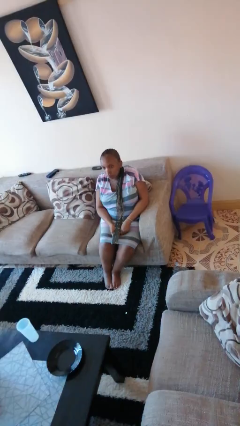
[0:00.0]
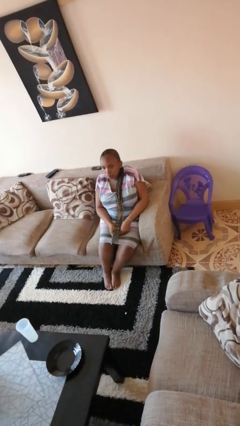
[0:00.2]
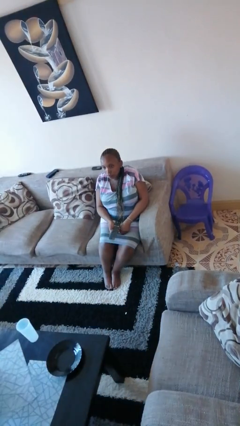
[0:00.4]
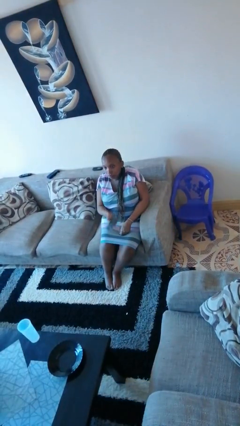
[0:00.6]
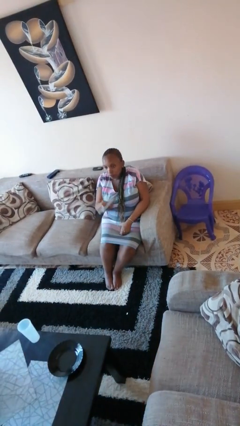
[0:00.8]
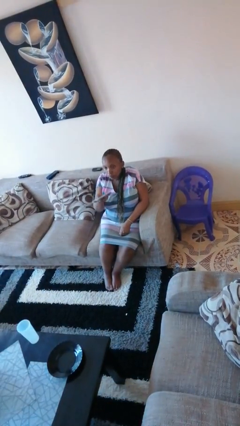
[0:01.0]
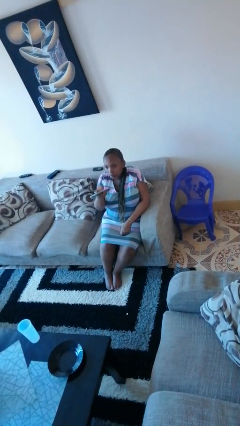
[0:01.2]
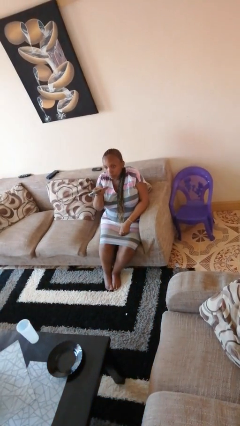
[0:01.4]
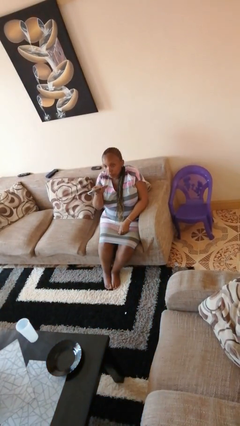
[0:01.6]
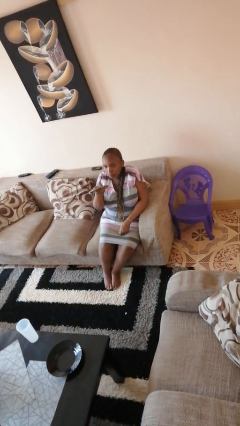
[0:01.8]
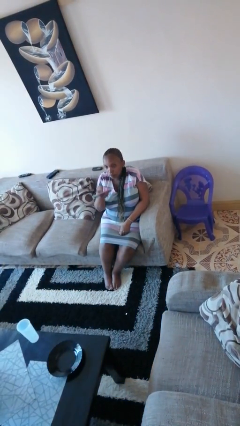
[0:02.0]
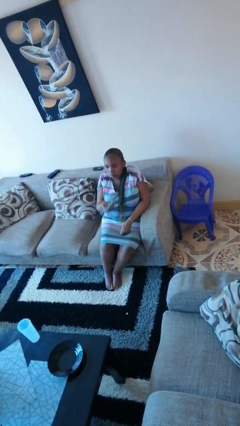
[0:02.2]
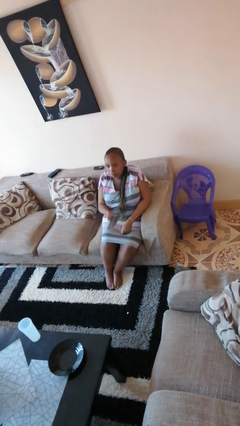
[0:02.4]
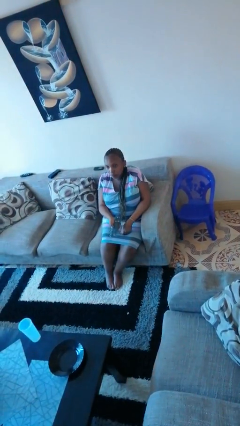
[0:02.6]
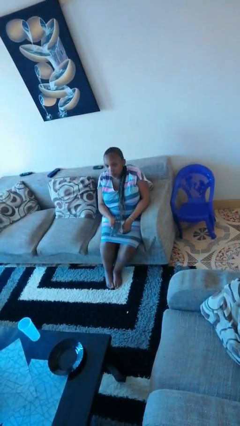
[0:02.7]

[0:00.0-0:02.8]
person uses television remote

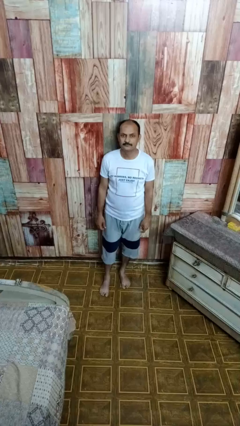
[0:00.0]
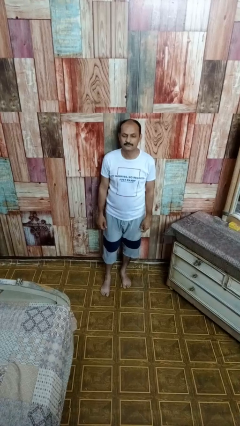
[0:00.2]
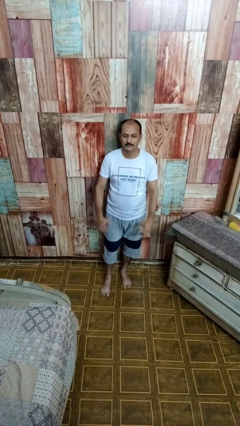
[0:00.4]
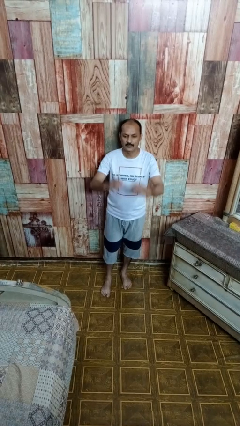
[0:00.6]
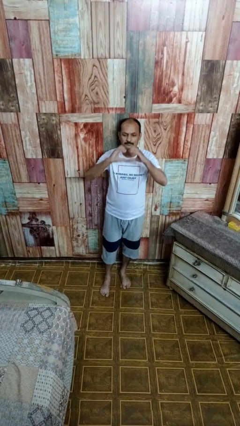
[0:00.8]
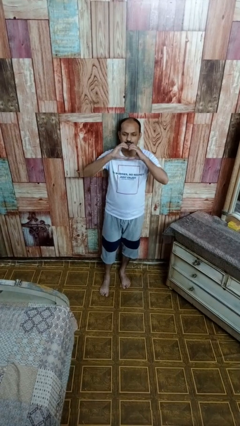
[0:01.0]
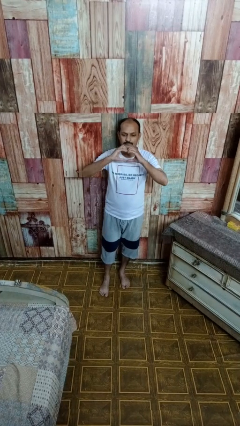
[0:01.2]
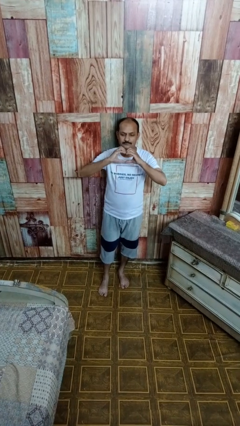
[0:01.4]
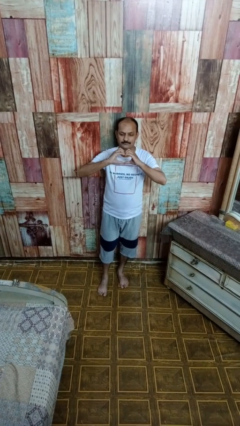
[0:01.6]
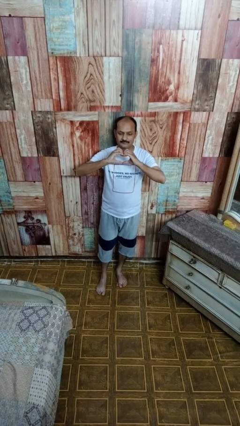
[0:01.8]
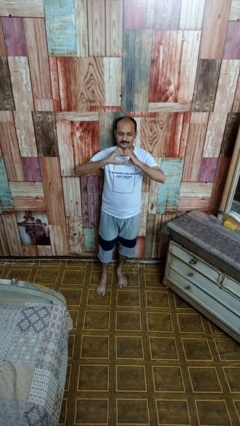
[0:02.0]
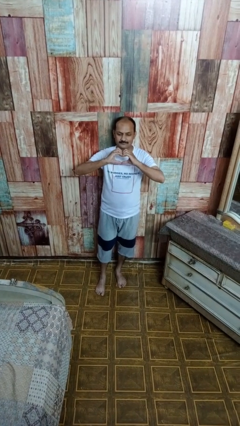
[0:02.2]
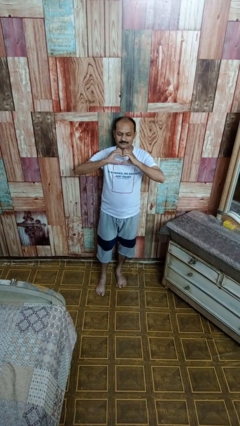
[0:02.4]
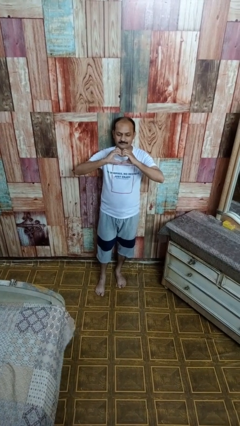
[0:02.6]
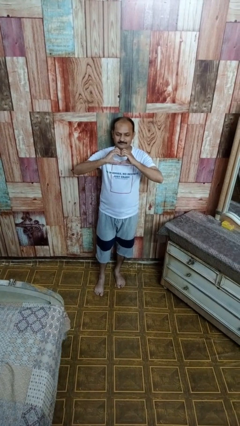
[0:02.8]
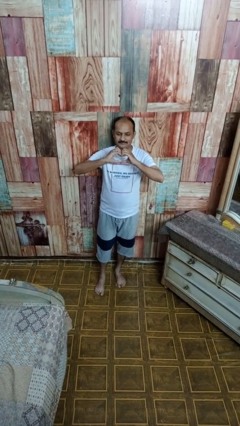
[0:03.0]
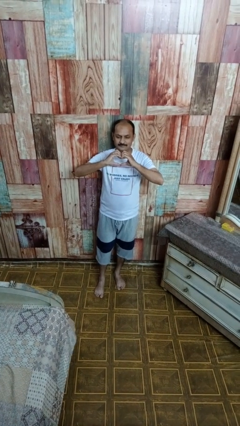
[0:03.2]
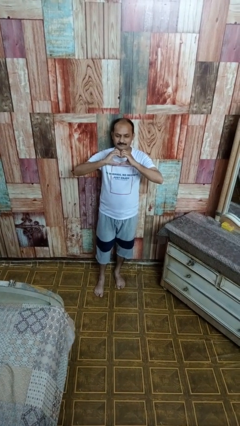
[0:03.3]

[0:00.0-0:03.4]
person gestures heart

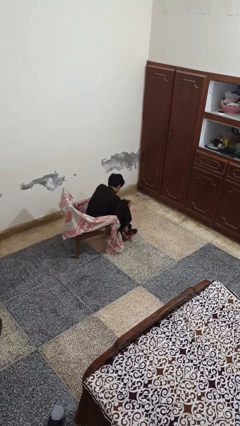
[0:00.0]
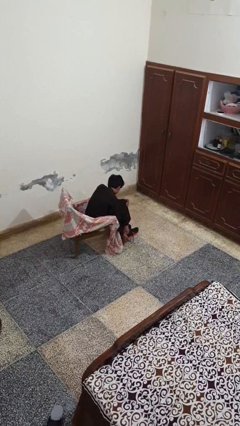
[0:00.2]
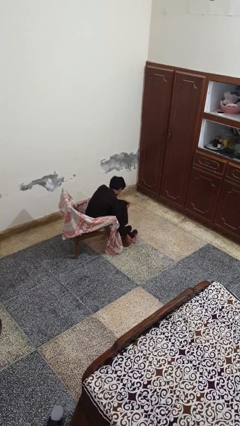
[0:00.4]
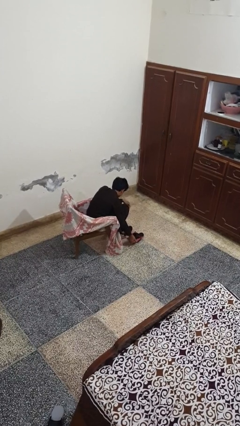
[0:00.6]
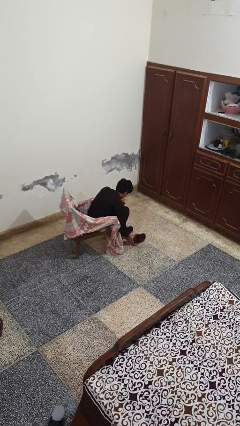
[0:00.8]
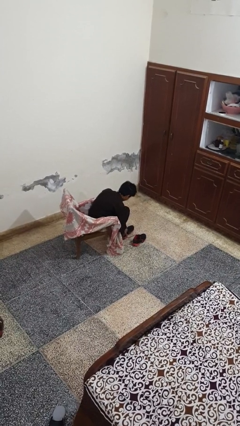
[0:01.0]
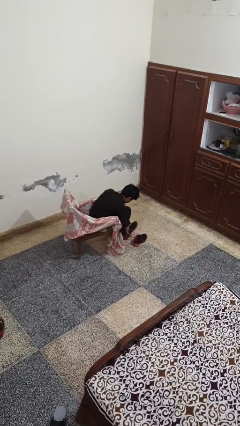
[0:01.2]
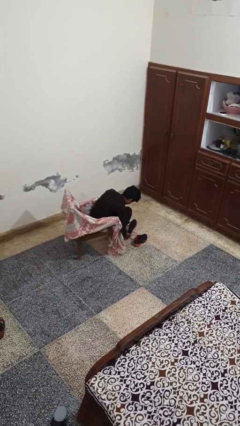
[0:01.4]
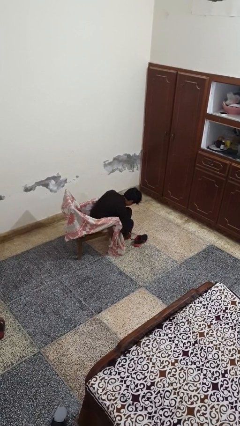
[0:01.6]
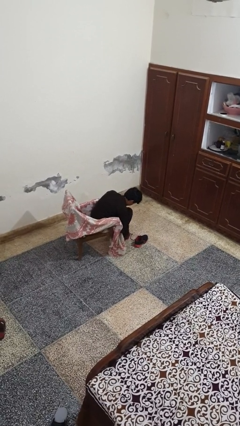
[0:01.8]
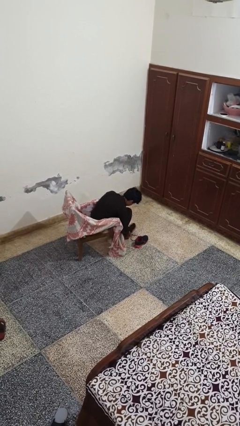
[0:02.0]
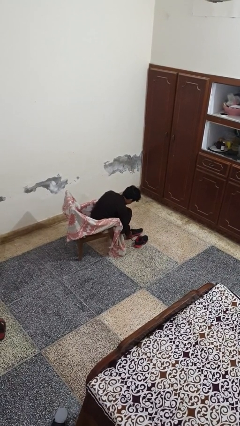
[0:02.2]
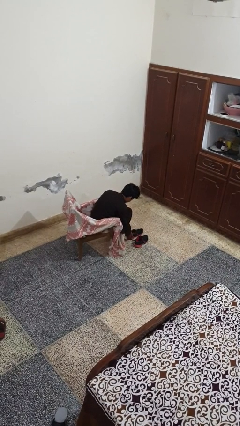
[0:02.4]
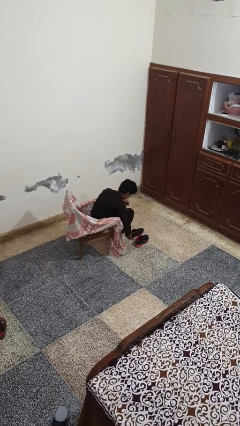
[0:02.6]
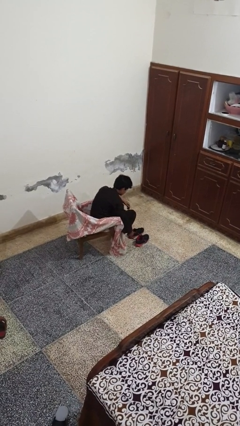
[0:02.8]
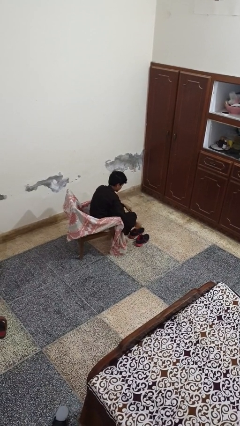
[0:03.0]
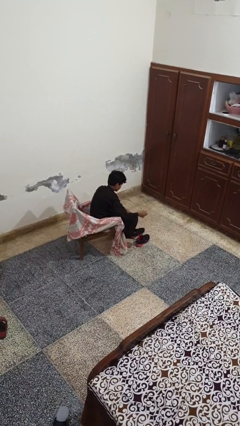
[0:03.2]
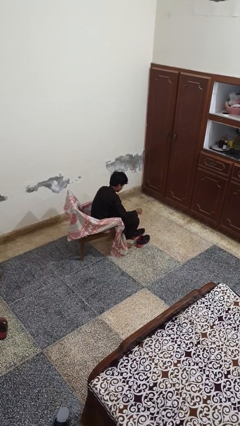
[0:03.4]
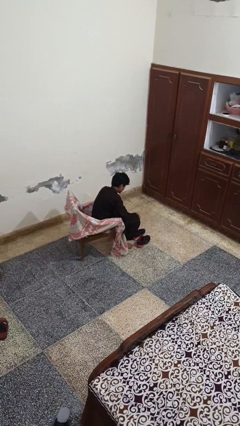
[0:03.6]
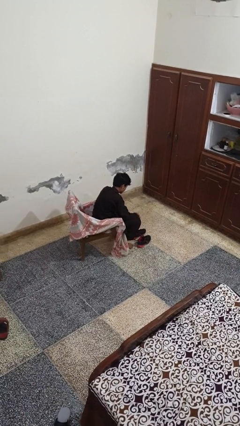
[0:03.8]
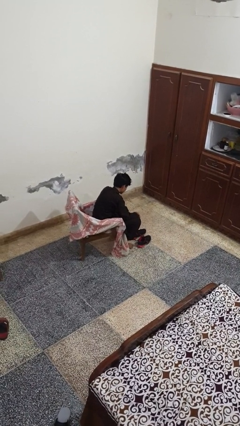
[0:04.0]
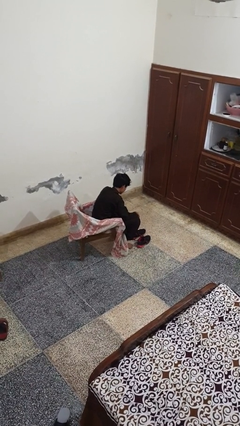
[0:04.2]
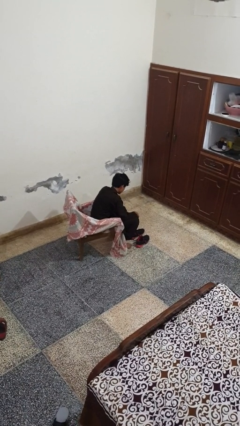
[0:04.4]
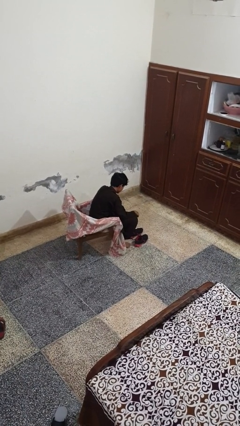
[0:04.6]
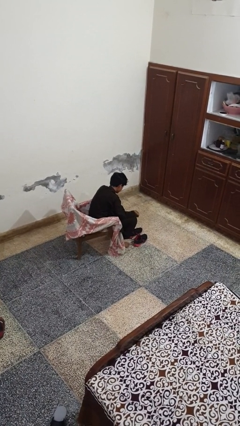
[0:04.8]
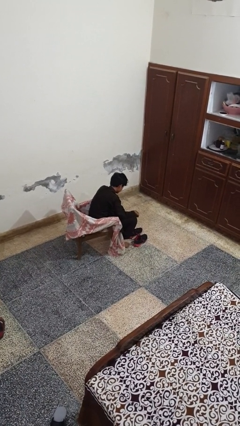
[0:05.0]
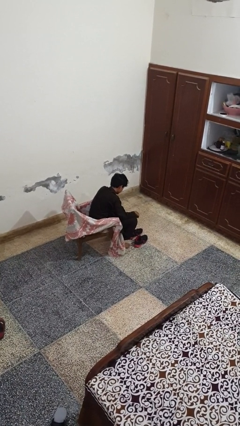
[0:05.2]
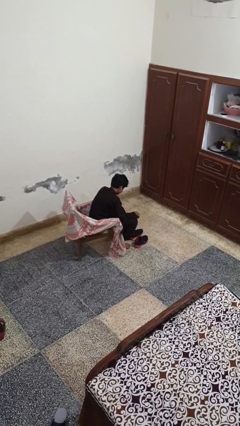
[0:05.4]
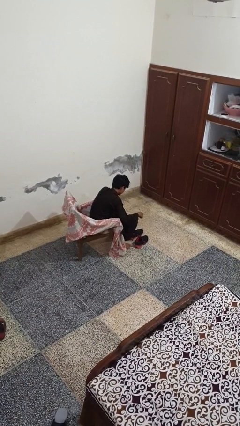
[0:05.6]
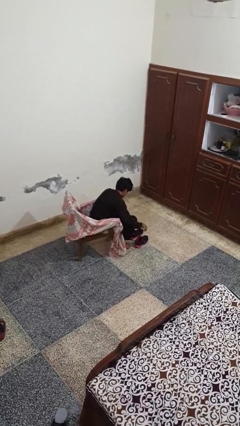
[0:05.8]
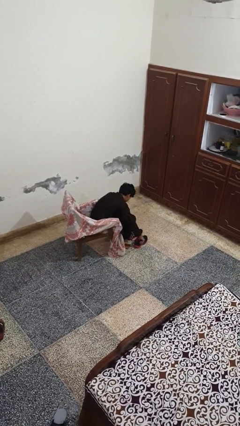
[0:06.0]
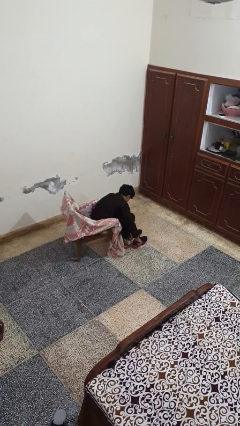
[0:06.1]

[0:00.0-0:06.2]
person takes off shoes

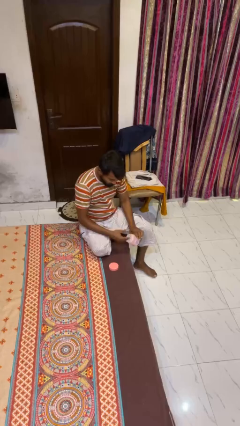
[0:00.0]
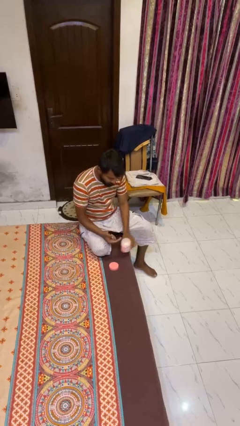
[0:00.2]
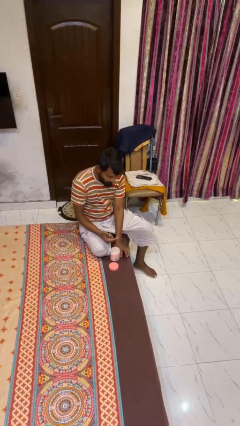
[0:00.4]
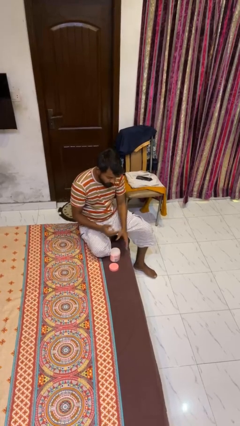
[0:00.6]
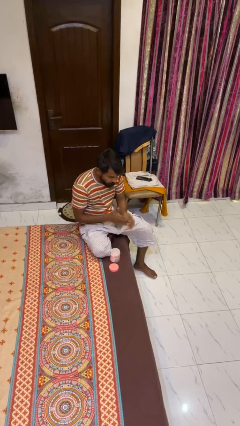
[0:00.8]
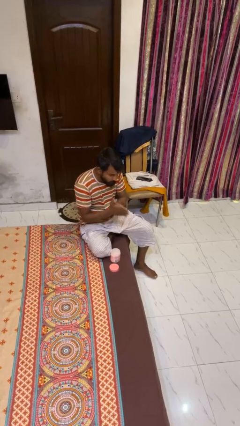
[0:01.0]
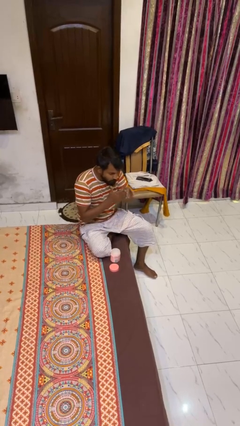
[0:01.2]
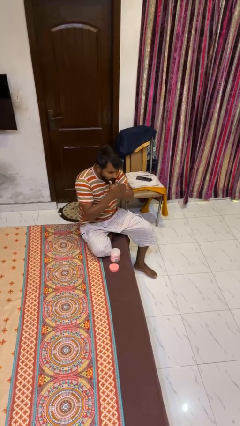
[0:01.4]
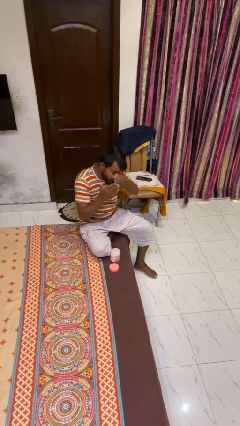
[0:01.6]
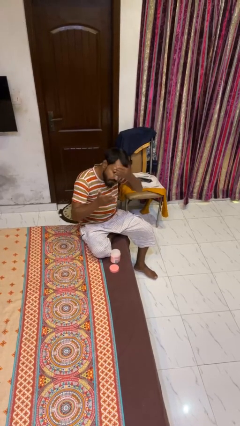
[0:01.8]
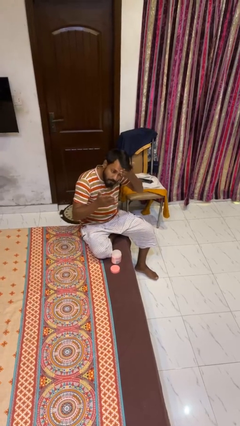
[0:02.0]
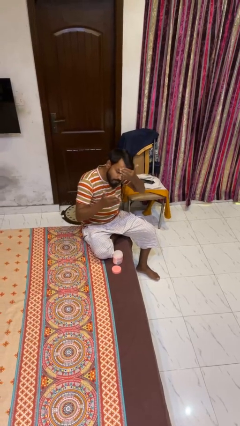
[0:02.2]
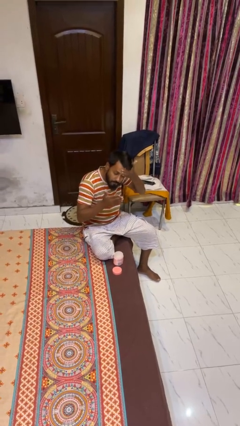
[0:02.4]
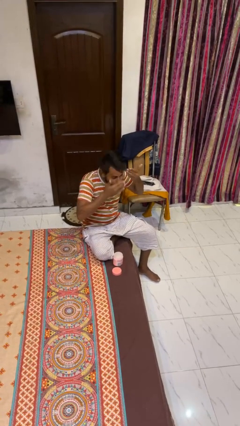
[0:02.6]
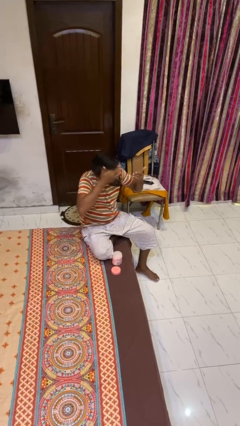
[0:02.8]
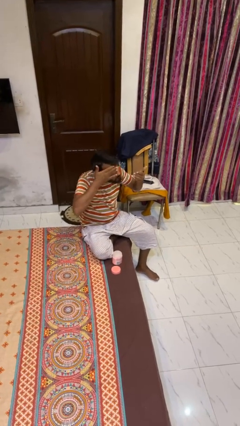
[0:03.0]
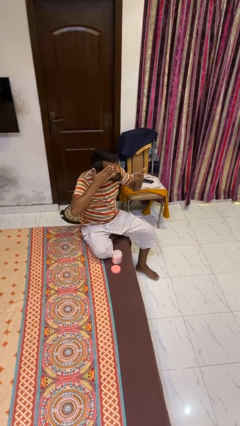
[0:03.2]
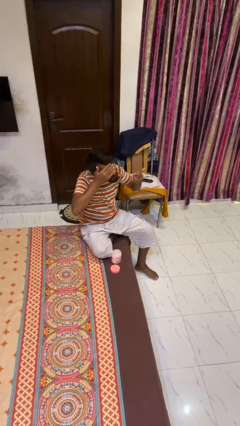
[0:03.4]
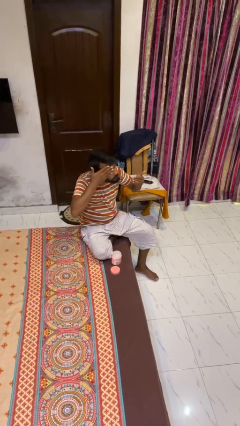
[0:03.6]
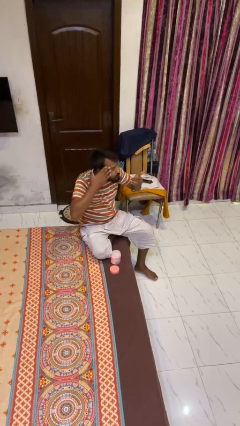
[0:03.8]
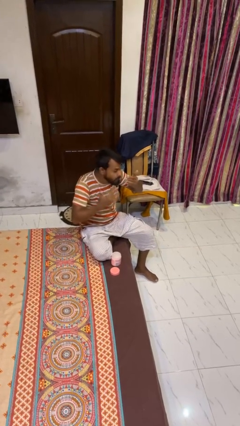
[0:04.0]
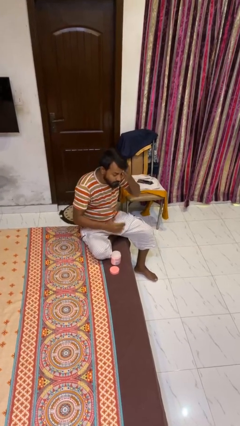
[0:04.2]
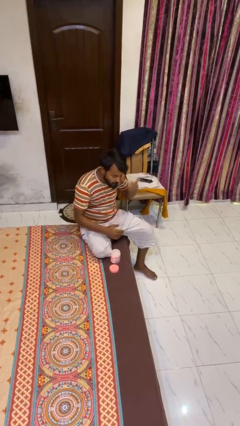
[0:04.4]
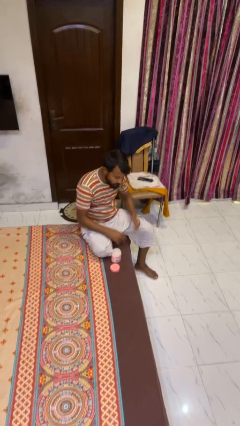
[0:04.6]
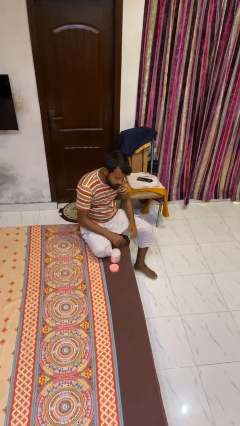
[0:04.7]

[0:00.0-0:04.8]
person applies facial moisturizer

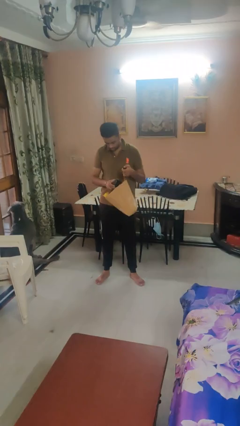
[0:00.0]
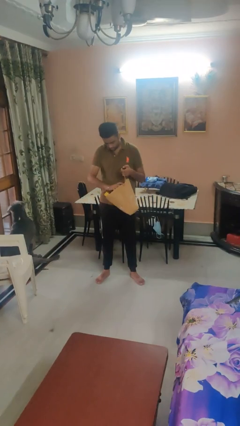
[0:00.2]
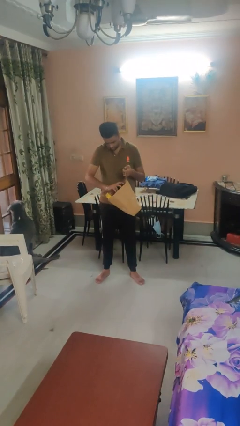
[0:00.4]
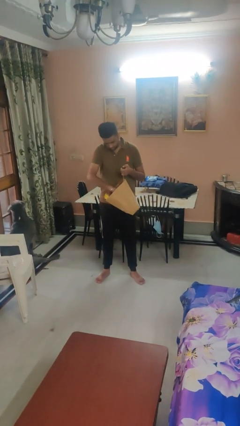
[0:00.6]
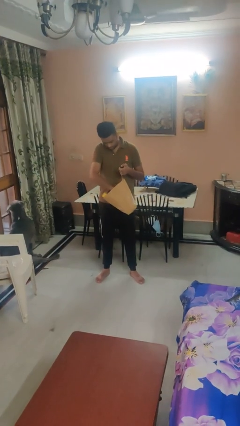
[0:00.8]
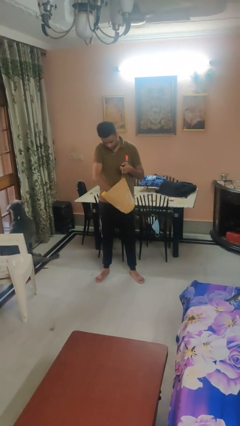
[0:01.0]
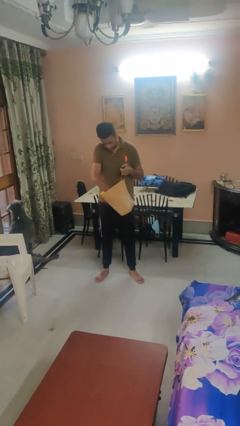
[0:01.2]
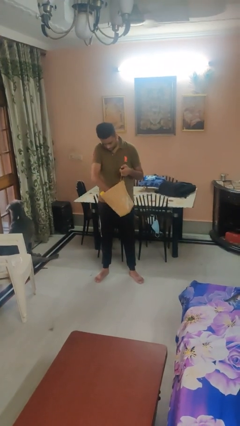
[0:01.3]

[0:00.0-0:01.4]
person puts object into bag
